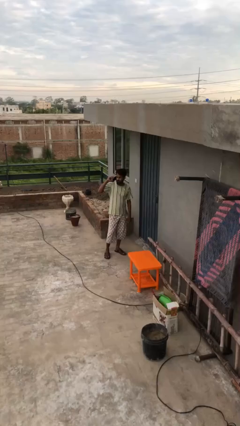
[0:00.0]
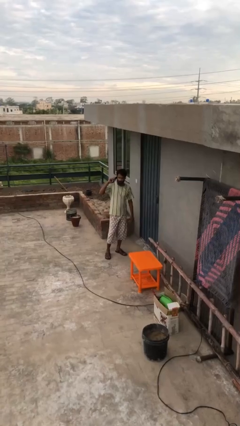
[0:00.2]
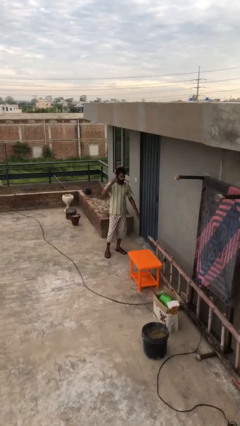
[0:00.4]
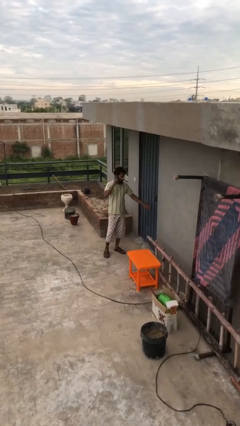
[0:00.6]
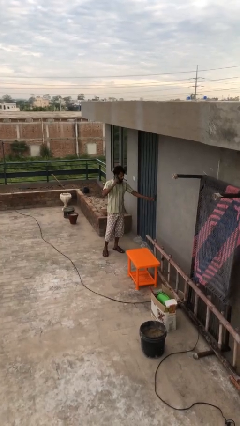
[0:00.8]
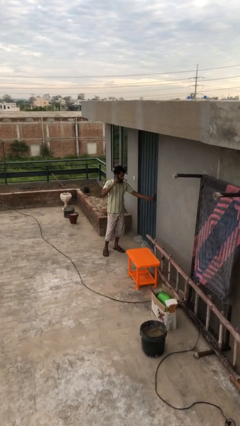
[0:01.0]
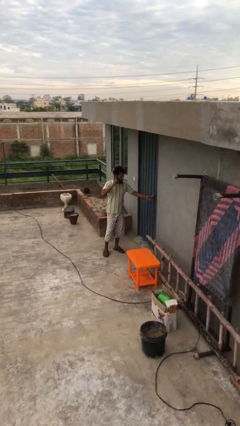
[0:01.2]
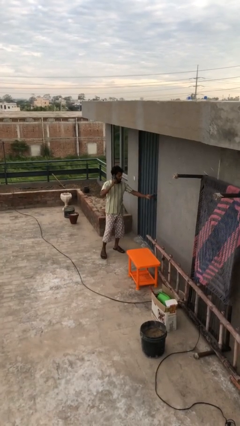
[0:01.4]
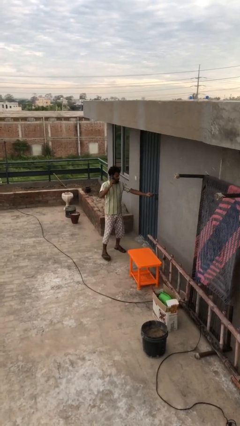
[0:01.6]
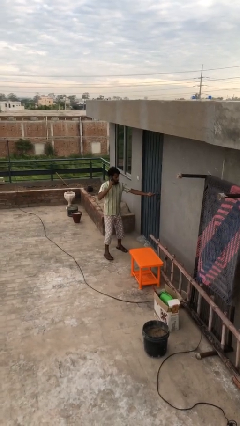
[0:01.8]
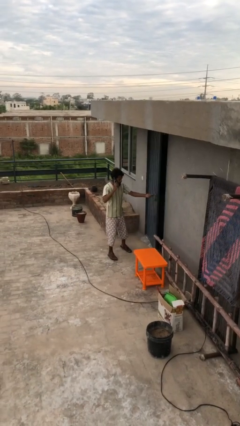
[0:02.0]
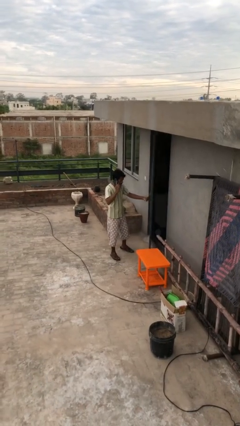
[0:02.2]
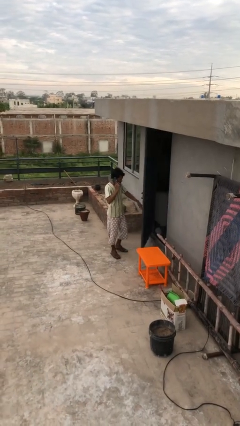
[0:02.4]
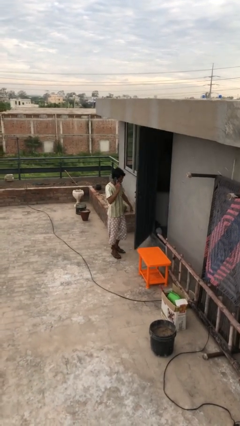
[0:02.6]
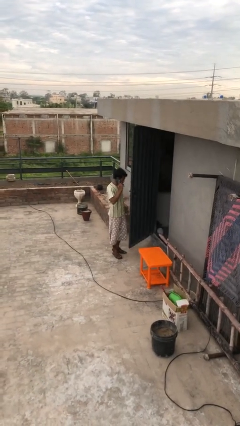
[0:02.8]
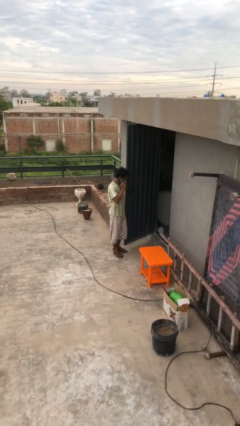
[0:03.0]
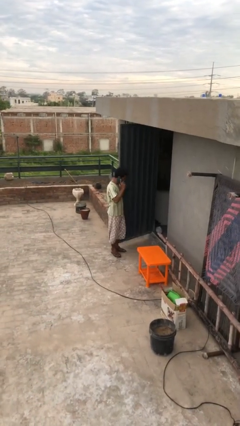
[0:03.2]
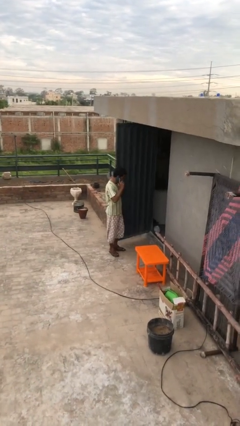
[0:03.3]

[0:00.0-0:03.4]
person opens facility door

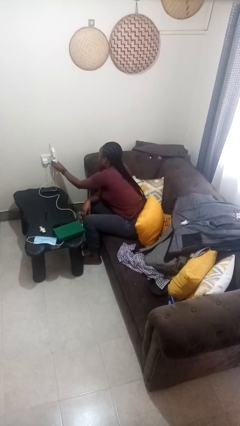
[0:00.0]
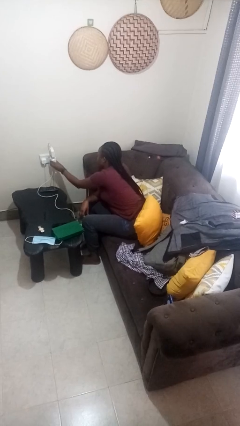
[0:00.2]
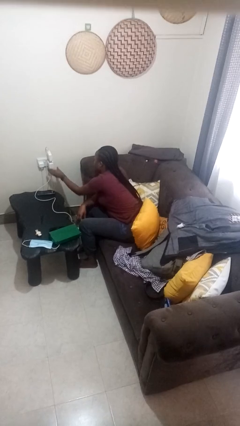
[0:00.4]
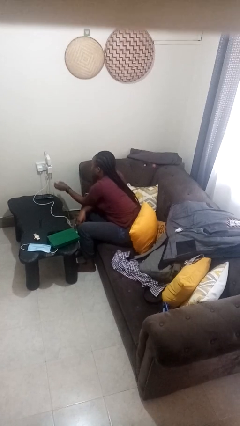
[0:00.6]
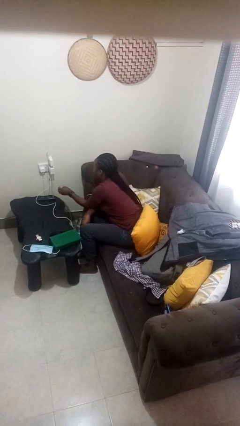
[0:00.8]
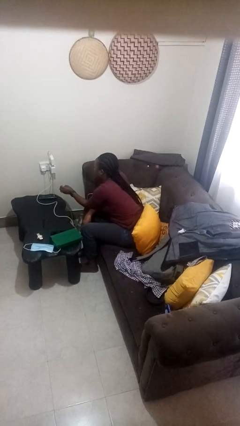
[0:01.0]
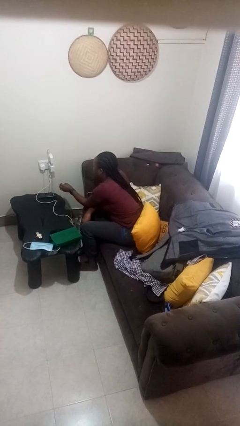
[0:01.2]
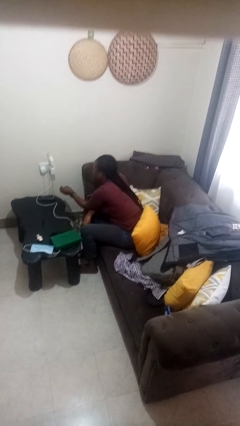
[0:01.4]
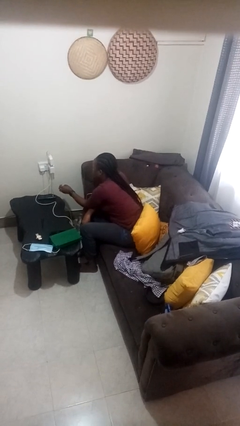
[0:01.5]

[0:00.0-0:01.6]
person plugs into electrical socket

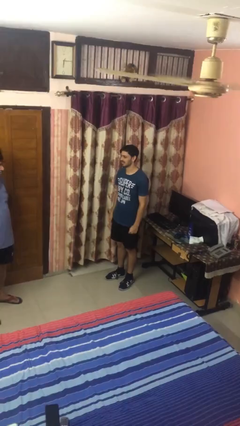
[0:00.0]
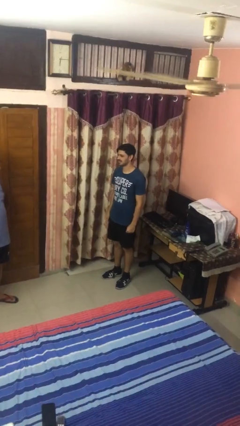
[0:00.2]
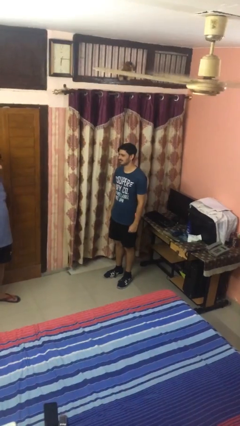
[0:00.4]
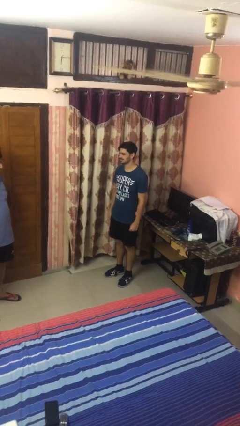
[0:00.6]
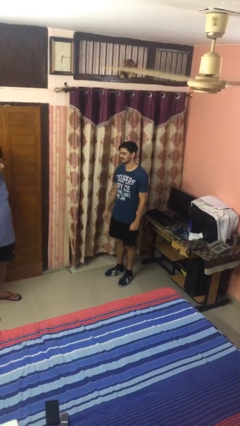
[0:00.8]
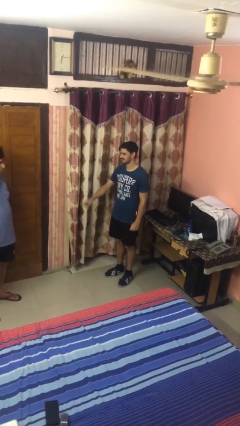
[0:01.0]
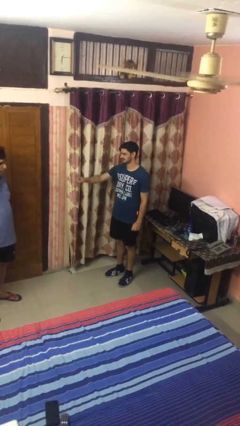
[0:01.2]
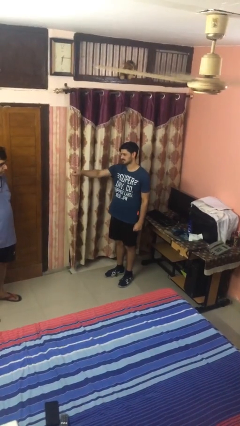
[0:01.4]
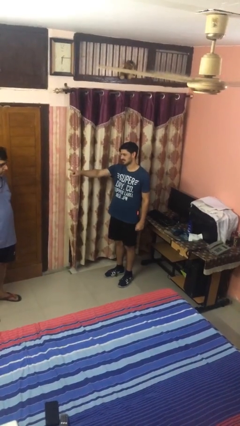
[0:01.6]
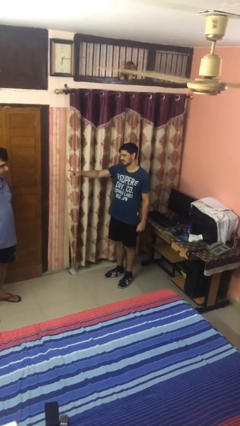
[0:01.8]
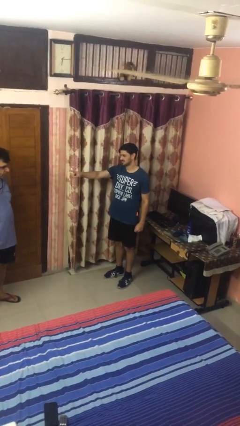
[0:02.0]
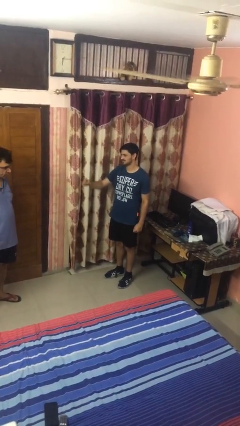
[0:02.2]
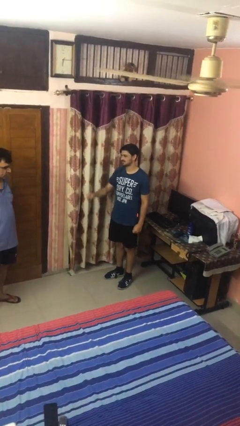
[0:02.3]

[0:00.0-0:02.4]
person points at person

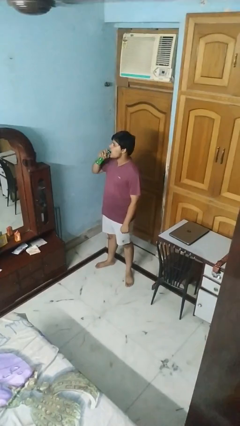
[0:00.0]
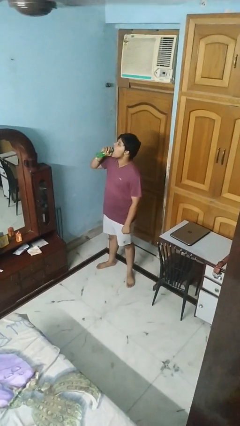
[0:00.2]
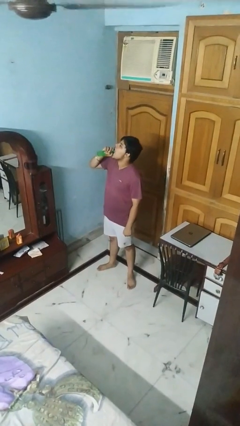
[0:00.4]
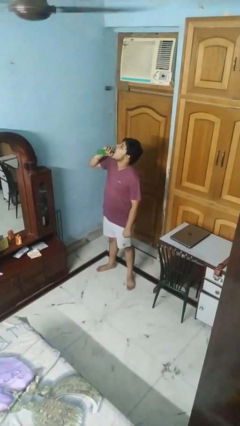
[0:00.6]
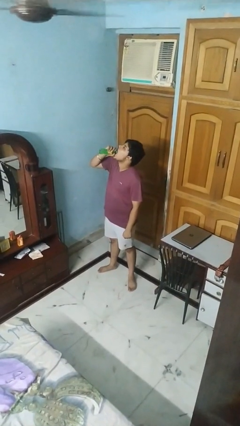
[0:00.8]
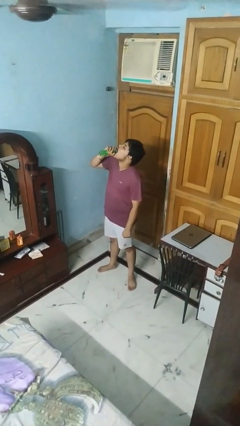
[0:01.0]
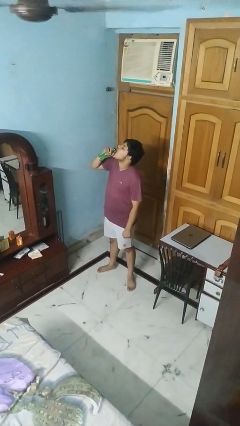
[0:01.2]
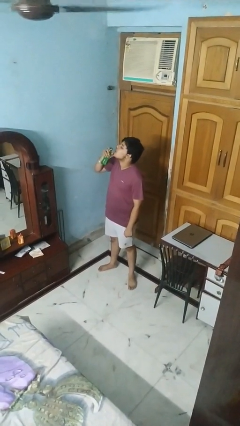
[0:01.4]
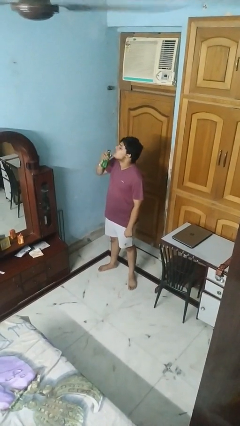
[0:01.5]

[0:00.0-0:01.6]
person drinks from bottle

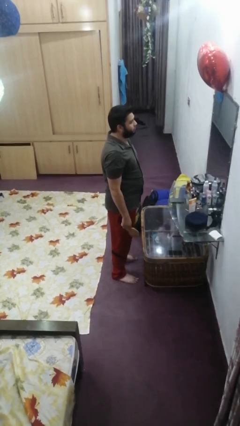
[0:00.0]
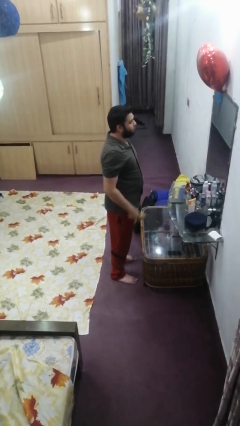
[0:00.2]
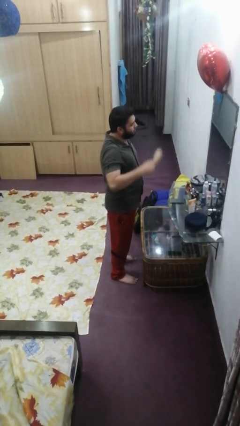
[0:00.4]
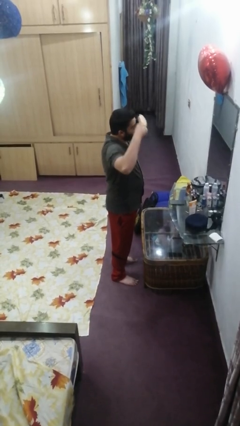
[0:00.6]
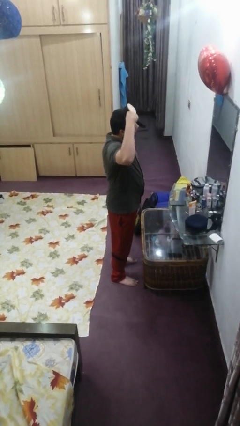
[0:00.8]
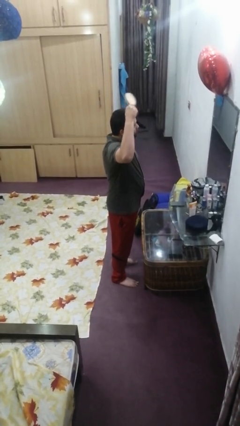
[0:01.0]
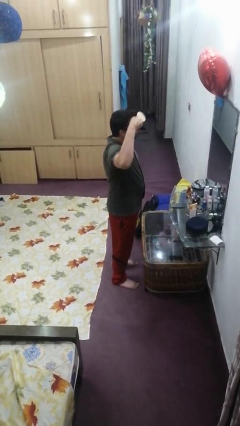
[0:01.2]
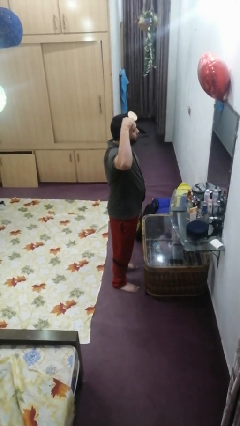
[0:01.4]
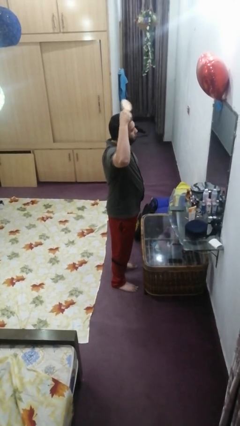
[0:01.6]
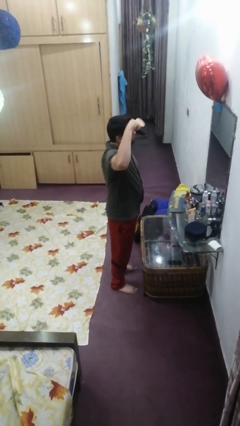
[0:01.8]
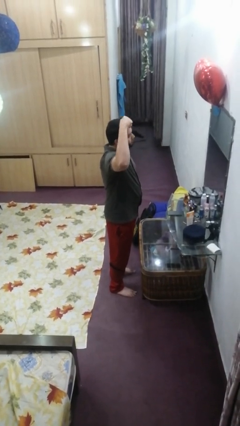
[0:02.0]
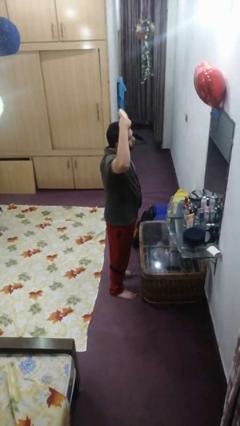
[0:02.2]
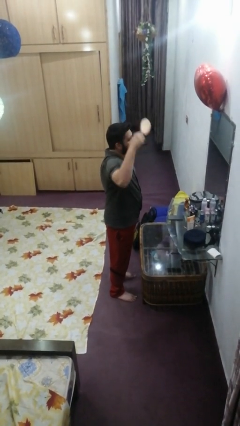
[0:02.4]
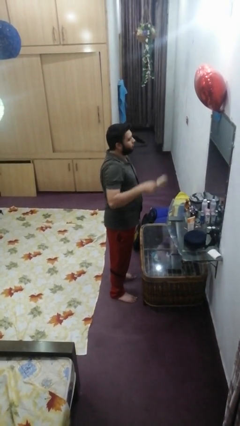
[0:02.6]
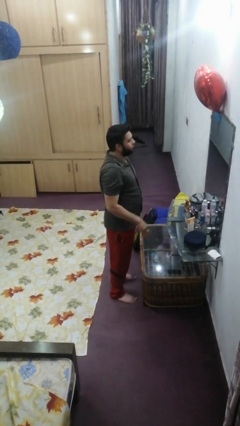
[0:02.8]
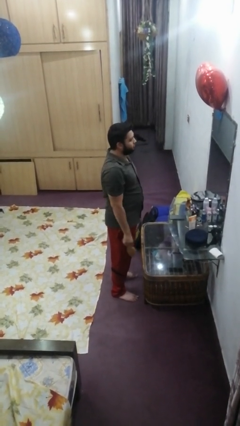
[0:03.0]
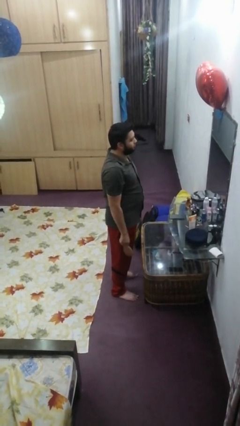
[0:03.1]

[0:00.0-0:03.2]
person brushes hair

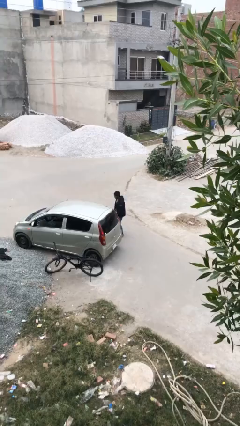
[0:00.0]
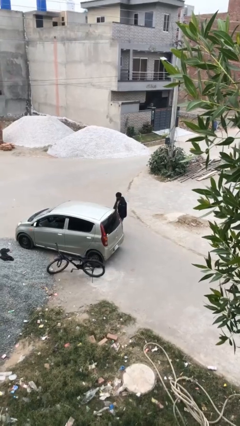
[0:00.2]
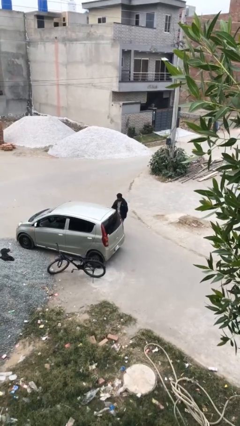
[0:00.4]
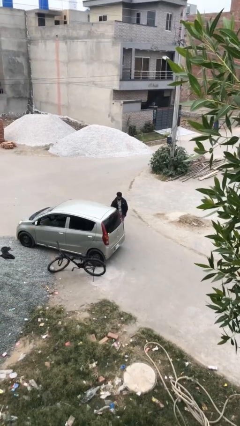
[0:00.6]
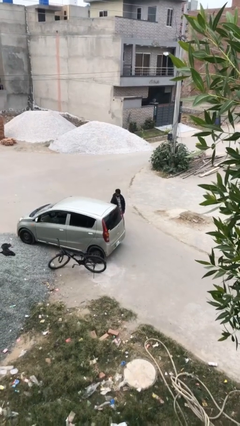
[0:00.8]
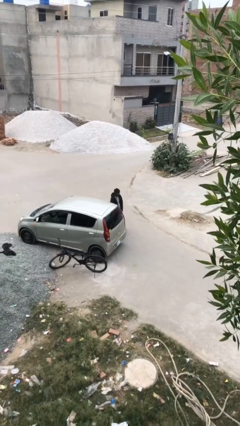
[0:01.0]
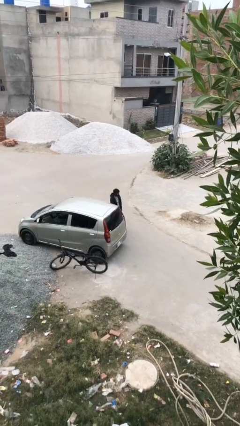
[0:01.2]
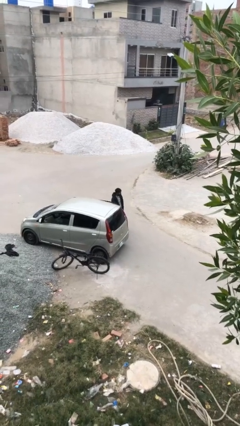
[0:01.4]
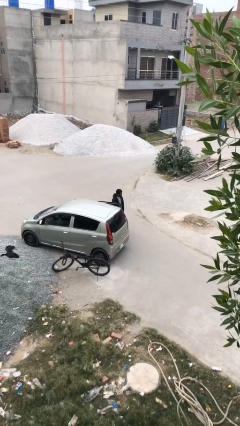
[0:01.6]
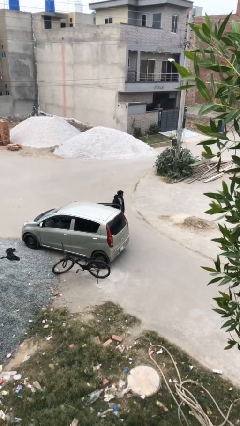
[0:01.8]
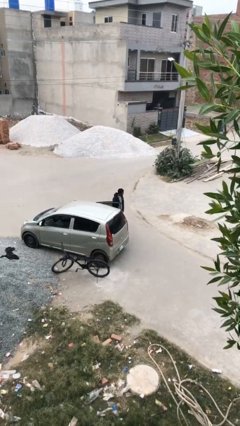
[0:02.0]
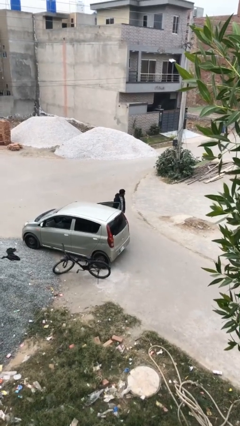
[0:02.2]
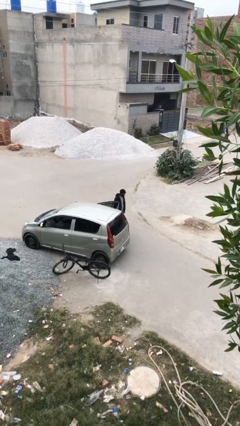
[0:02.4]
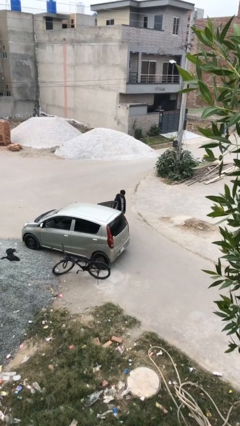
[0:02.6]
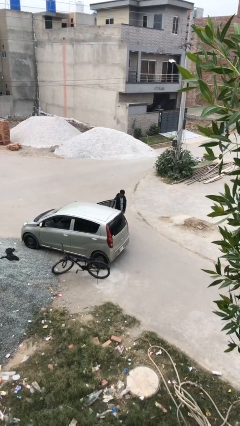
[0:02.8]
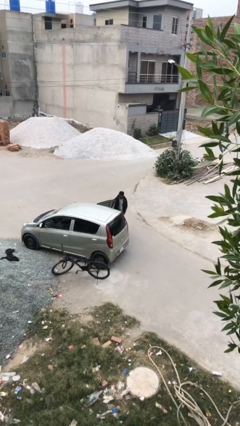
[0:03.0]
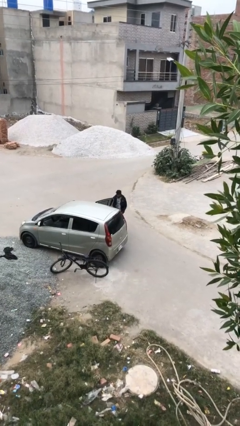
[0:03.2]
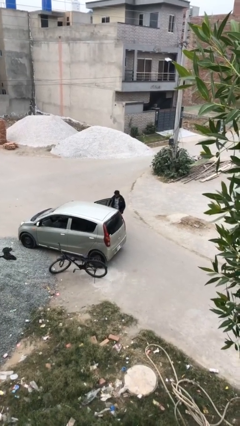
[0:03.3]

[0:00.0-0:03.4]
person opens car door

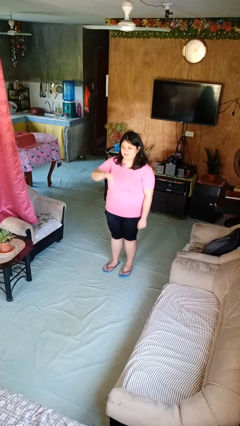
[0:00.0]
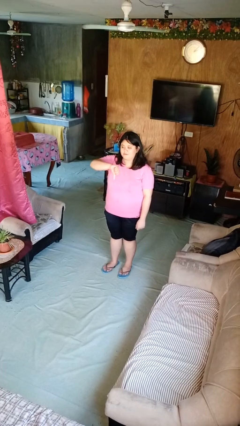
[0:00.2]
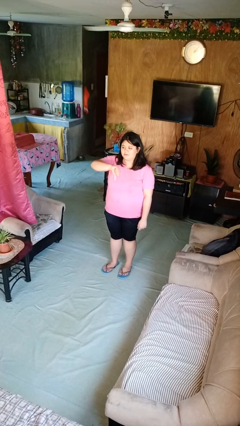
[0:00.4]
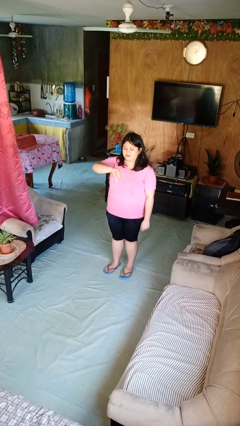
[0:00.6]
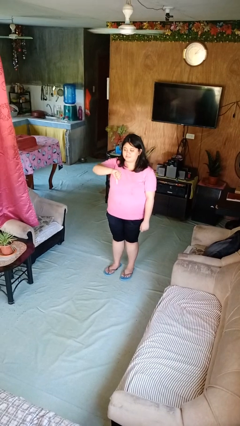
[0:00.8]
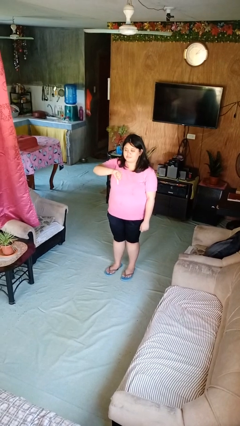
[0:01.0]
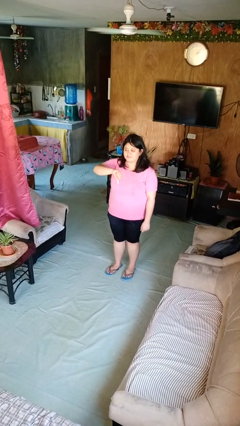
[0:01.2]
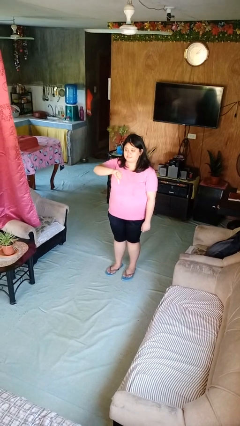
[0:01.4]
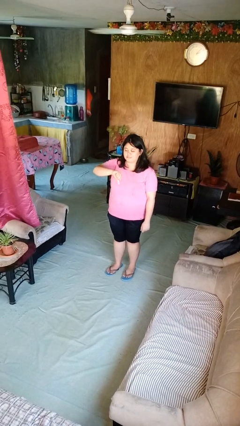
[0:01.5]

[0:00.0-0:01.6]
person gestures thumbs down
